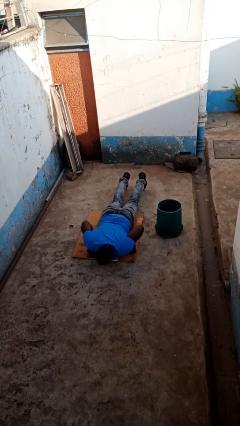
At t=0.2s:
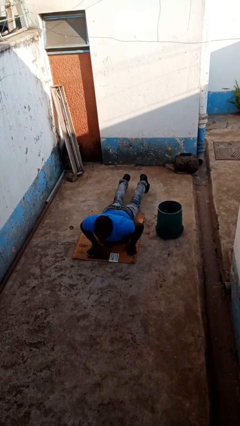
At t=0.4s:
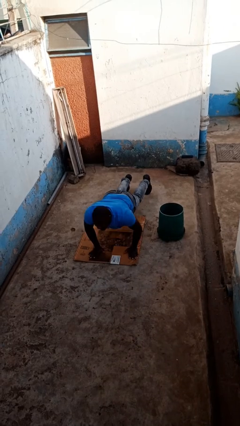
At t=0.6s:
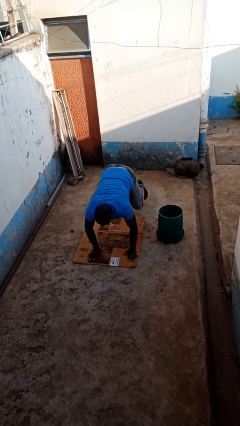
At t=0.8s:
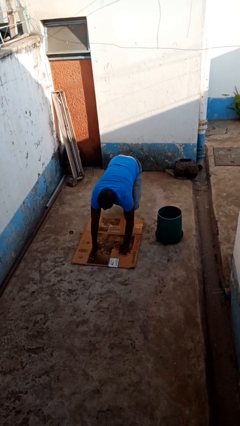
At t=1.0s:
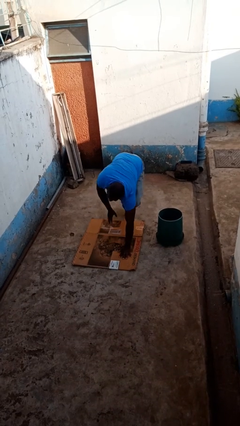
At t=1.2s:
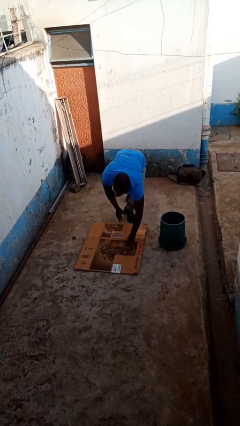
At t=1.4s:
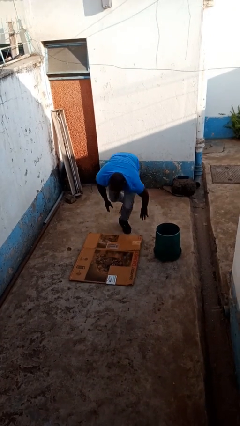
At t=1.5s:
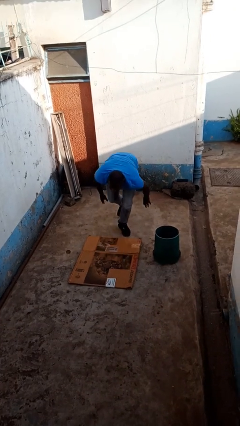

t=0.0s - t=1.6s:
person stands up from floor

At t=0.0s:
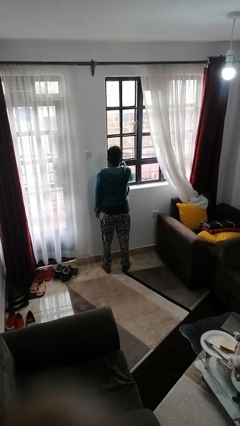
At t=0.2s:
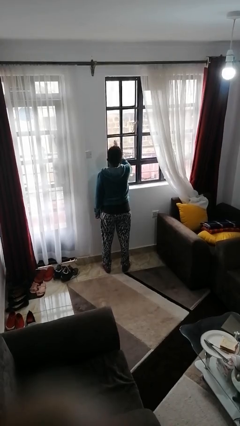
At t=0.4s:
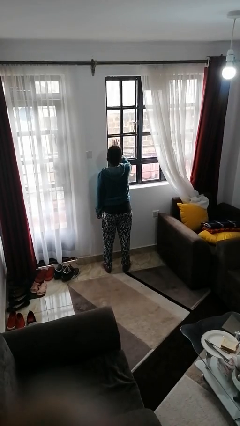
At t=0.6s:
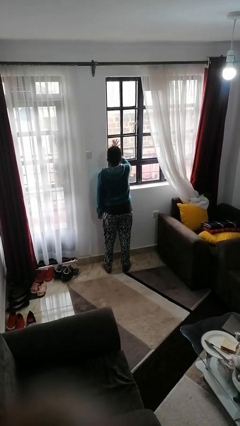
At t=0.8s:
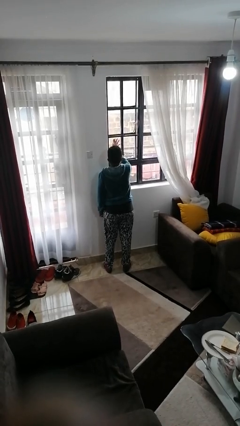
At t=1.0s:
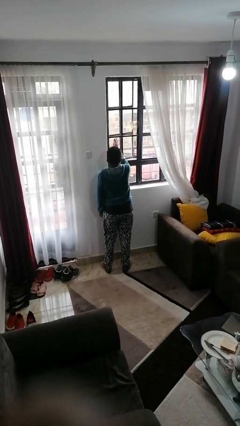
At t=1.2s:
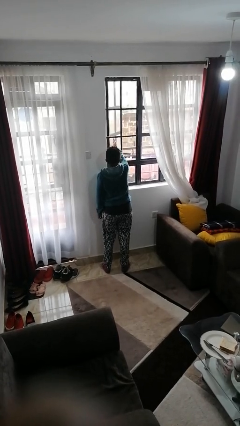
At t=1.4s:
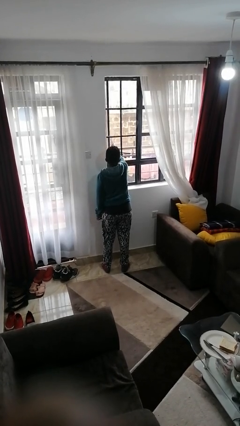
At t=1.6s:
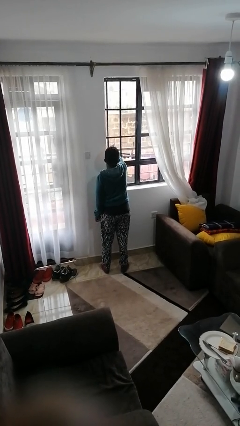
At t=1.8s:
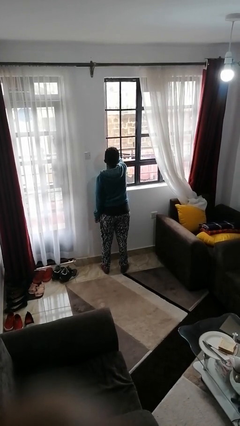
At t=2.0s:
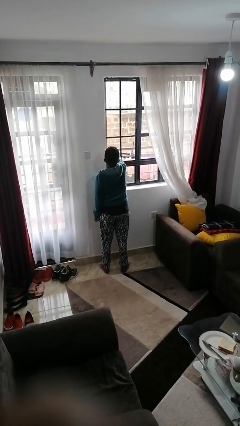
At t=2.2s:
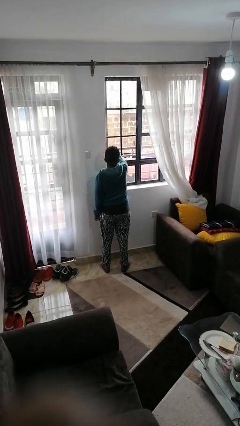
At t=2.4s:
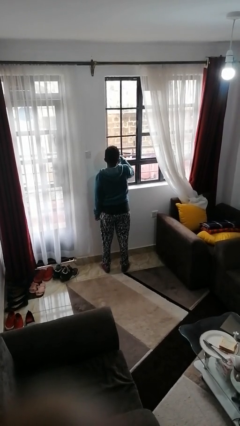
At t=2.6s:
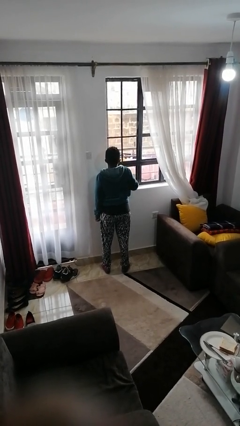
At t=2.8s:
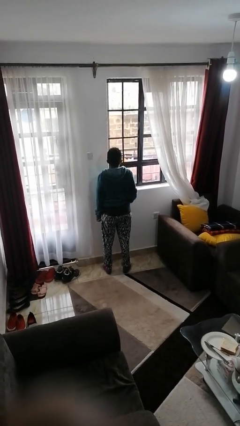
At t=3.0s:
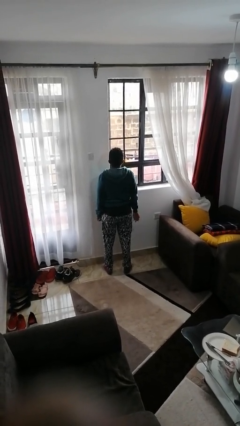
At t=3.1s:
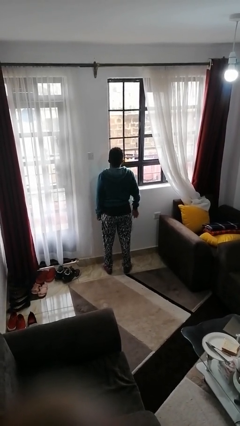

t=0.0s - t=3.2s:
person opens home window

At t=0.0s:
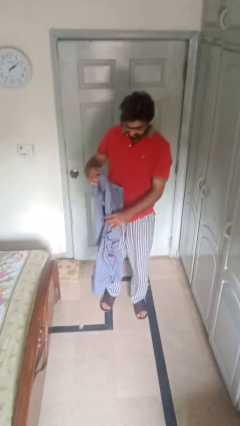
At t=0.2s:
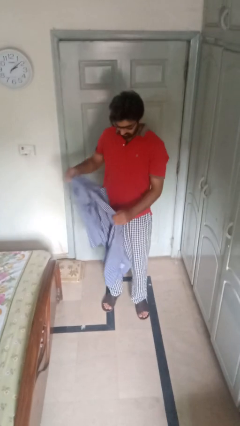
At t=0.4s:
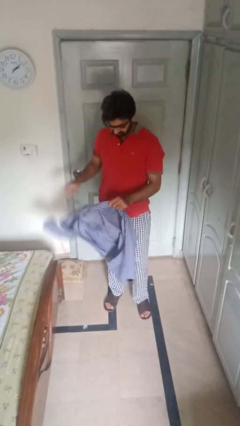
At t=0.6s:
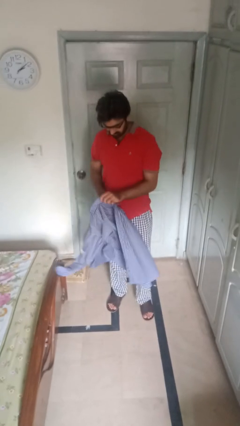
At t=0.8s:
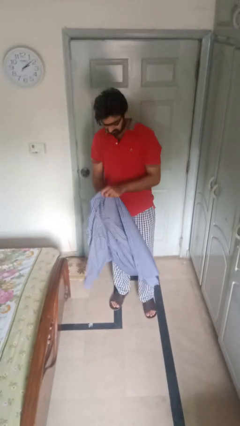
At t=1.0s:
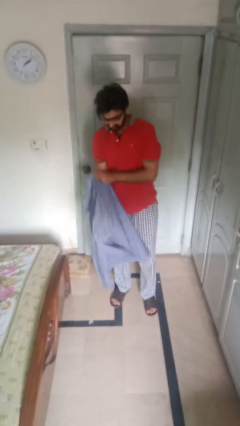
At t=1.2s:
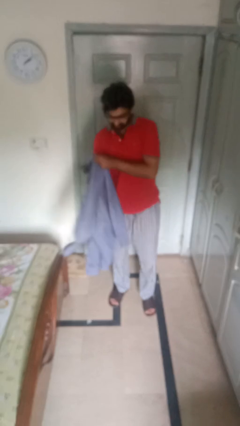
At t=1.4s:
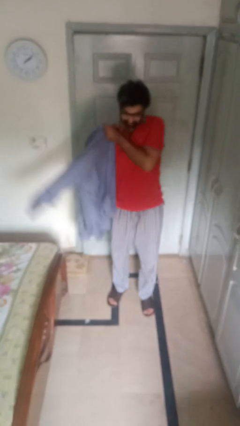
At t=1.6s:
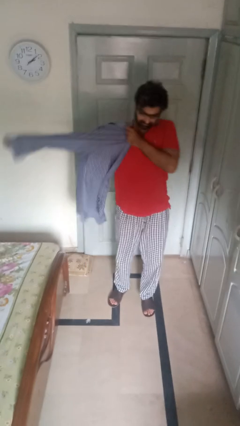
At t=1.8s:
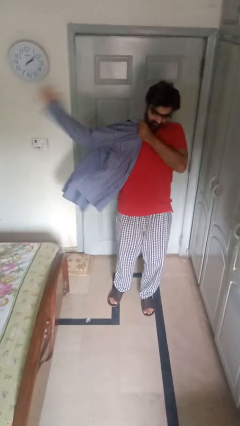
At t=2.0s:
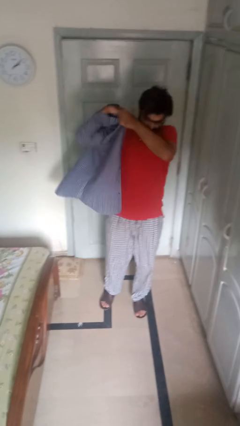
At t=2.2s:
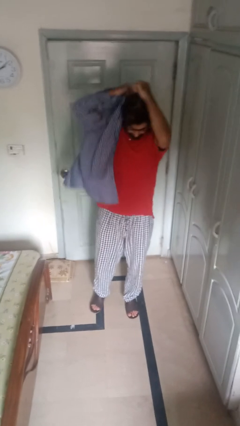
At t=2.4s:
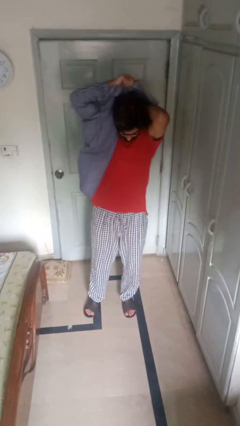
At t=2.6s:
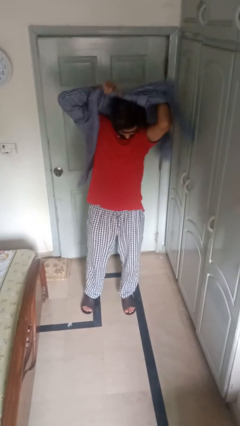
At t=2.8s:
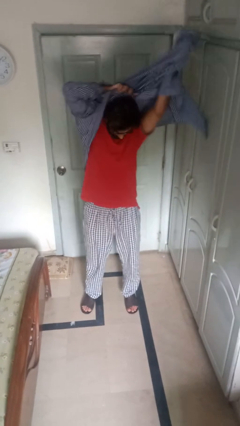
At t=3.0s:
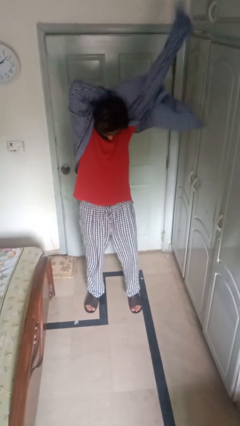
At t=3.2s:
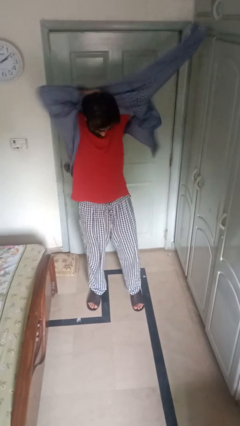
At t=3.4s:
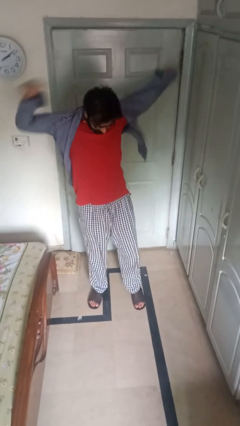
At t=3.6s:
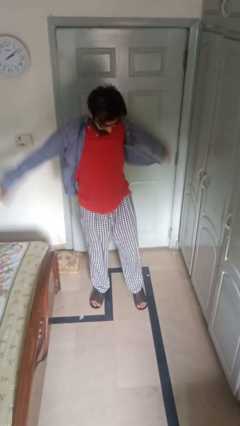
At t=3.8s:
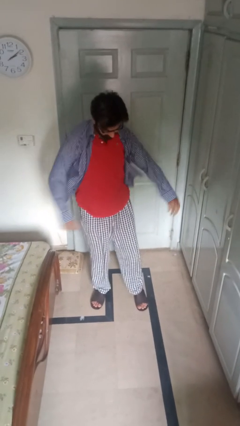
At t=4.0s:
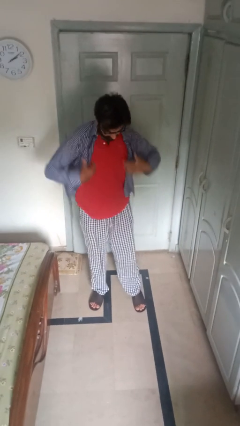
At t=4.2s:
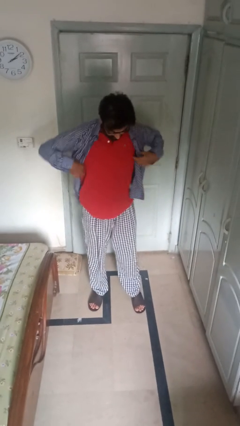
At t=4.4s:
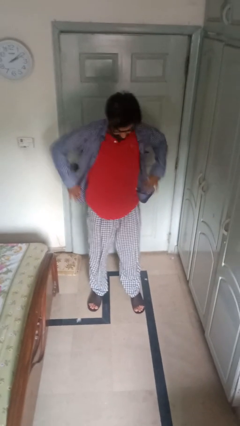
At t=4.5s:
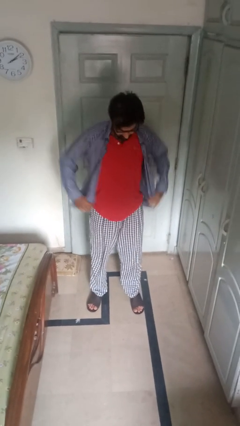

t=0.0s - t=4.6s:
person puts on shirt

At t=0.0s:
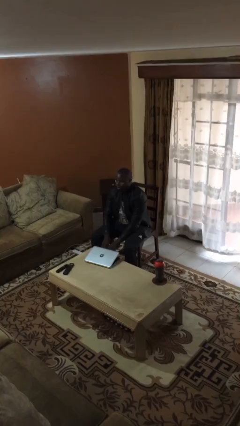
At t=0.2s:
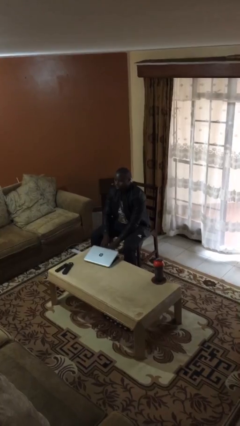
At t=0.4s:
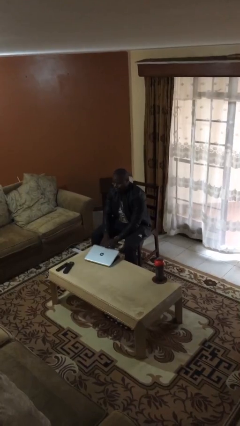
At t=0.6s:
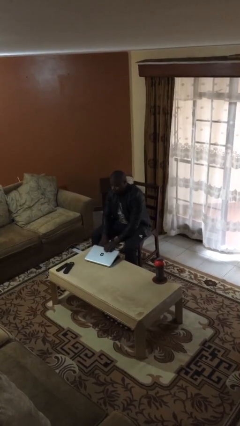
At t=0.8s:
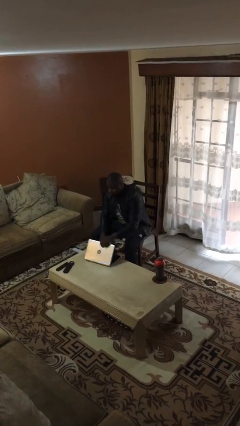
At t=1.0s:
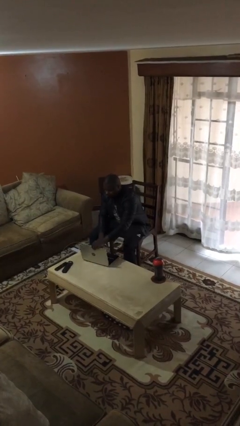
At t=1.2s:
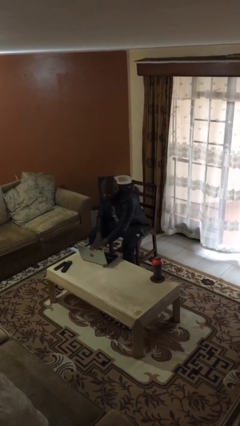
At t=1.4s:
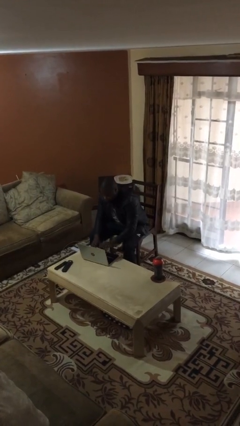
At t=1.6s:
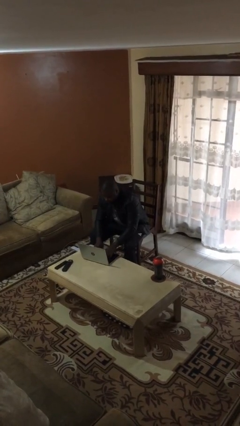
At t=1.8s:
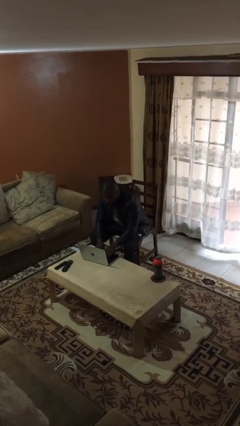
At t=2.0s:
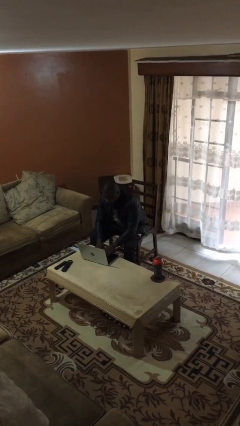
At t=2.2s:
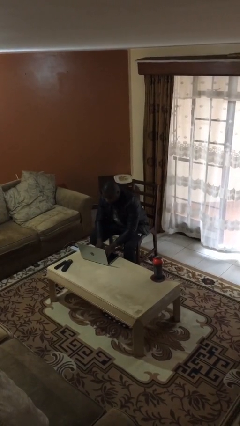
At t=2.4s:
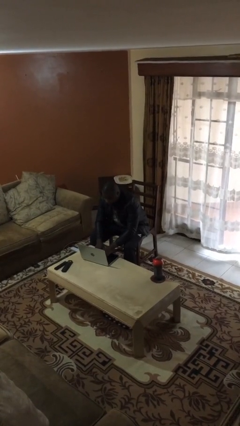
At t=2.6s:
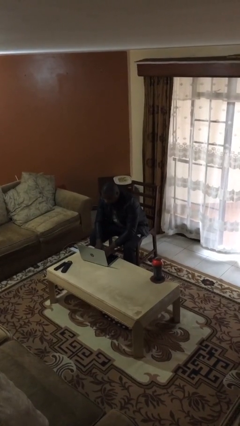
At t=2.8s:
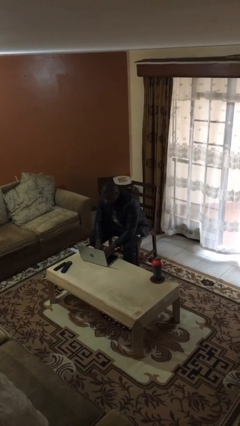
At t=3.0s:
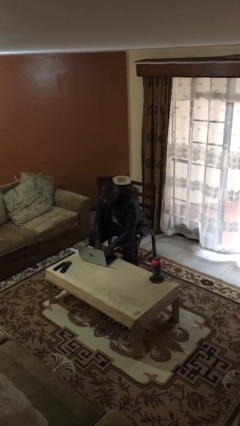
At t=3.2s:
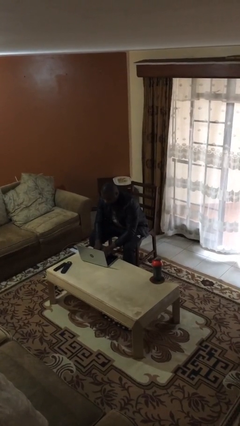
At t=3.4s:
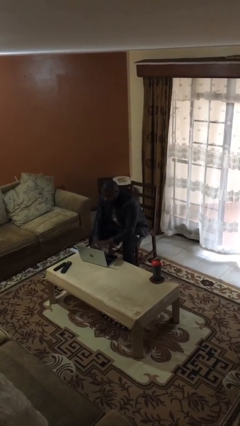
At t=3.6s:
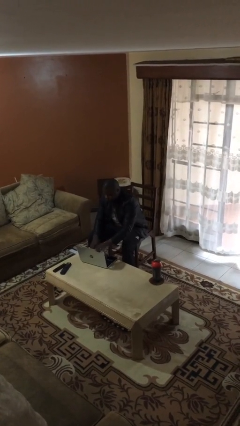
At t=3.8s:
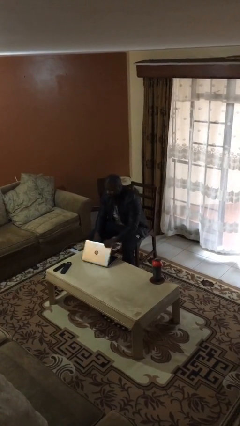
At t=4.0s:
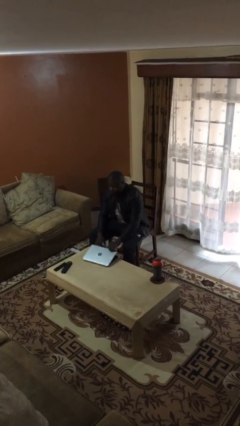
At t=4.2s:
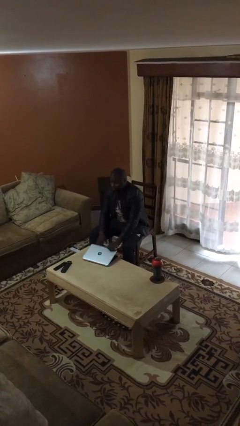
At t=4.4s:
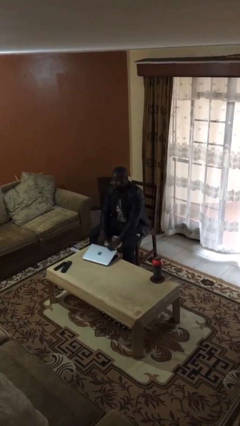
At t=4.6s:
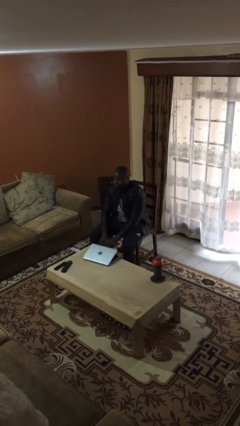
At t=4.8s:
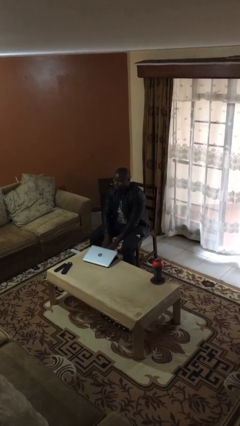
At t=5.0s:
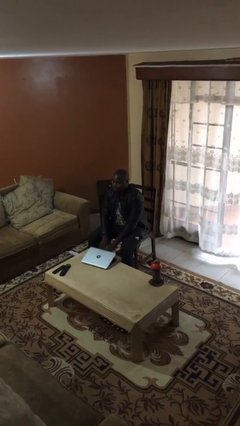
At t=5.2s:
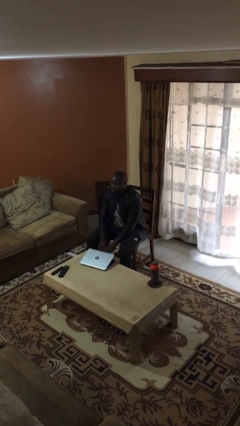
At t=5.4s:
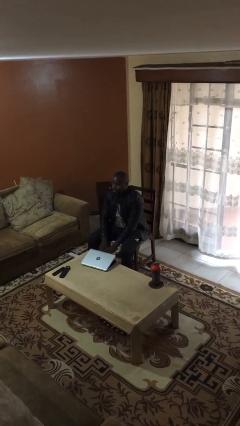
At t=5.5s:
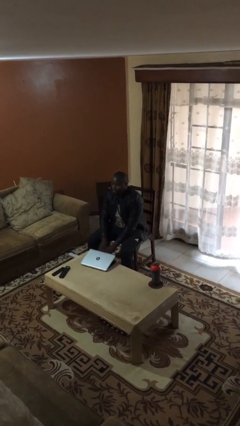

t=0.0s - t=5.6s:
person interacts with laptop

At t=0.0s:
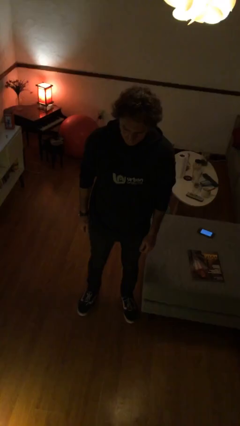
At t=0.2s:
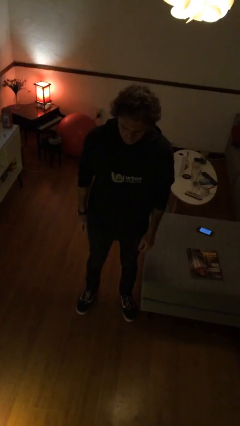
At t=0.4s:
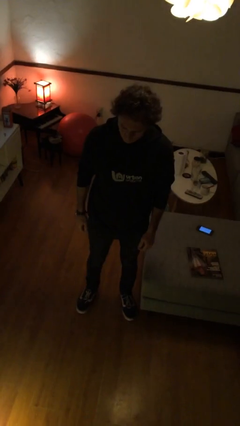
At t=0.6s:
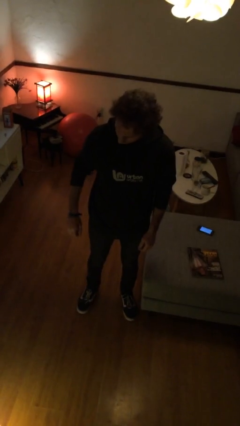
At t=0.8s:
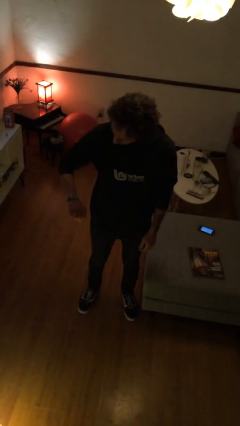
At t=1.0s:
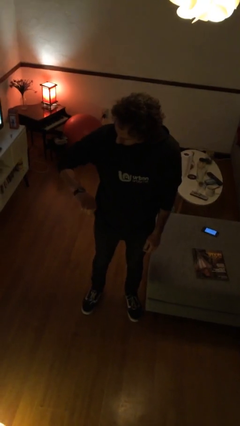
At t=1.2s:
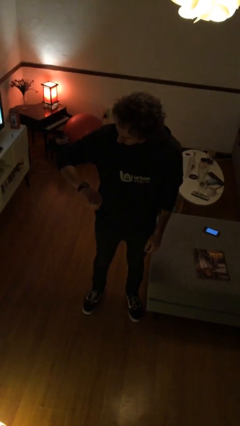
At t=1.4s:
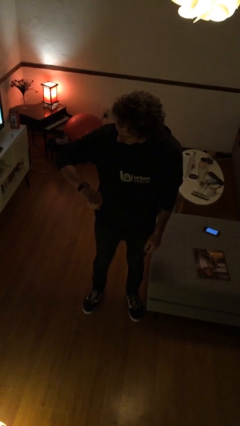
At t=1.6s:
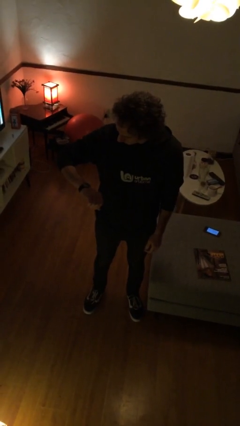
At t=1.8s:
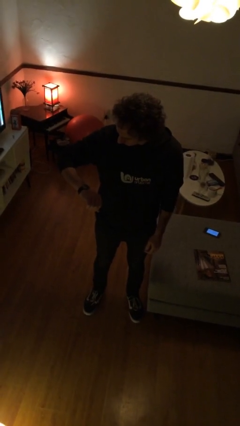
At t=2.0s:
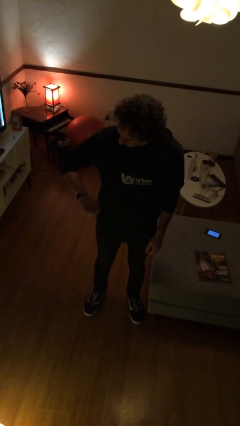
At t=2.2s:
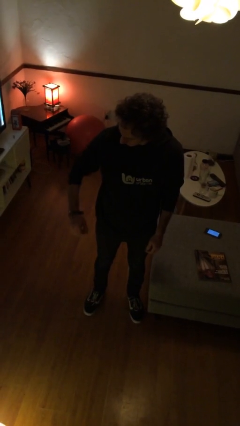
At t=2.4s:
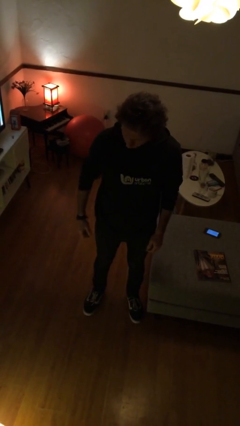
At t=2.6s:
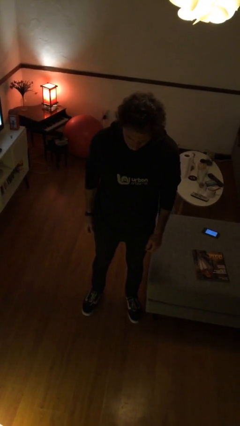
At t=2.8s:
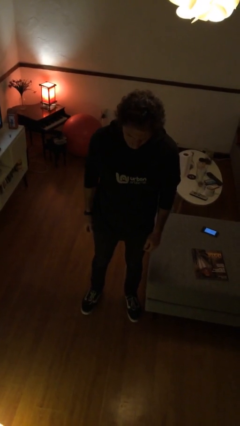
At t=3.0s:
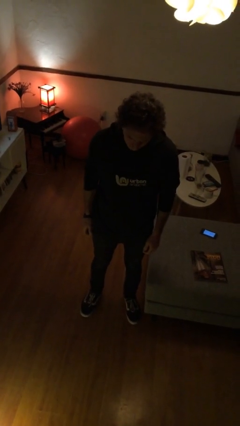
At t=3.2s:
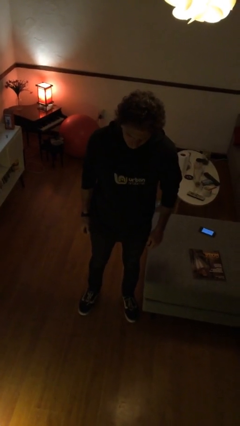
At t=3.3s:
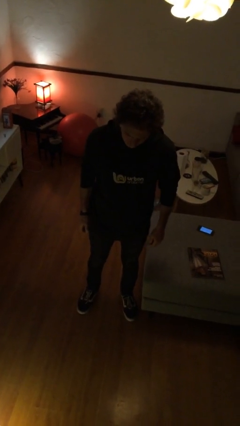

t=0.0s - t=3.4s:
person looks at wristwatch
